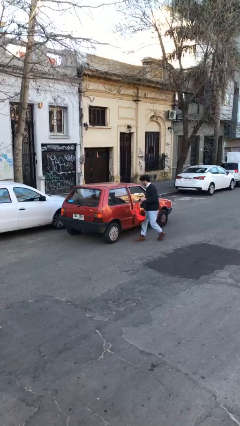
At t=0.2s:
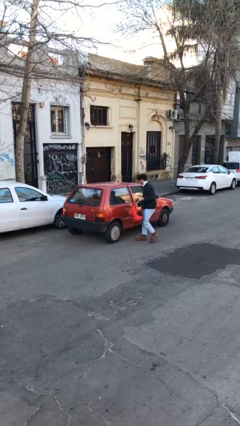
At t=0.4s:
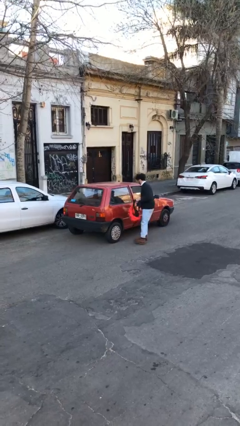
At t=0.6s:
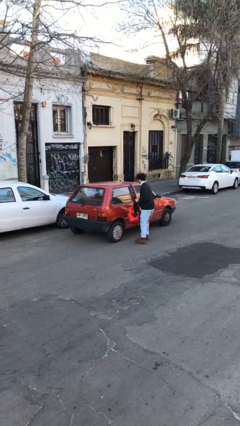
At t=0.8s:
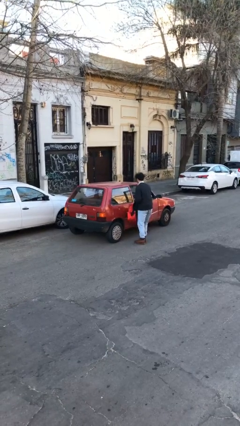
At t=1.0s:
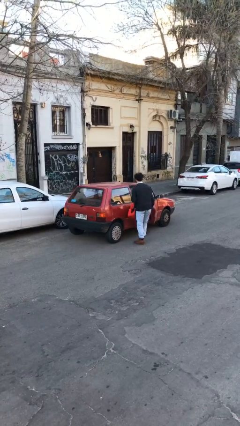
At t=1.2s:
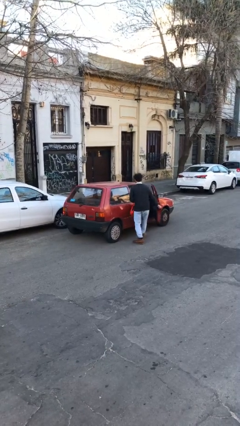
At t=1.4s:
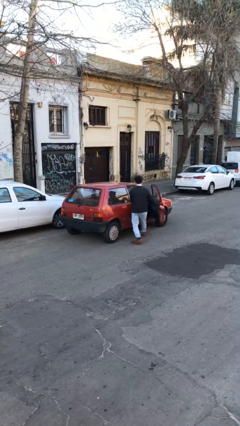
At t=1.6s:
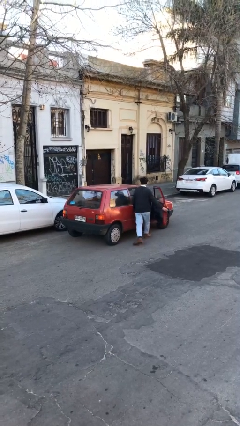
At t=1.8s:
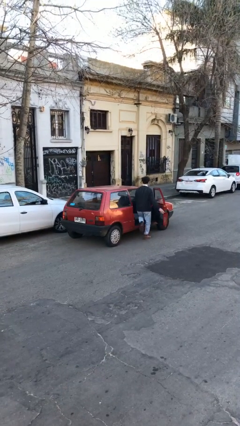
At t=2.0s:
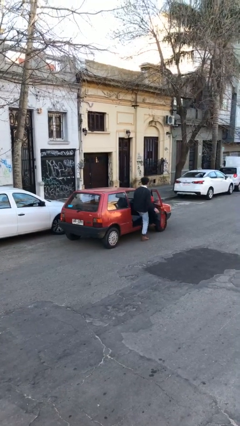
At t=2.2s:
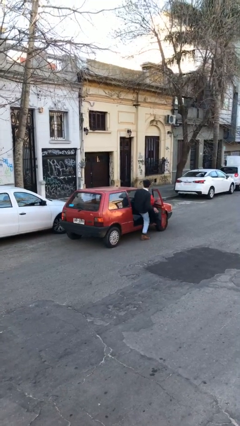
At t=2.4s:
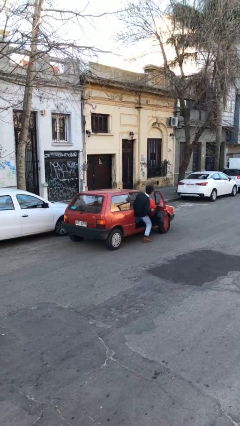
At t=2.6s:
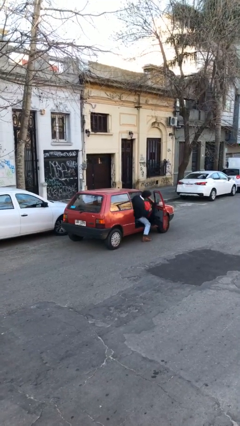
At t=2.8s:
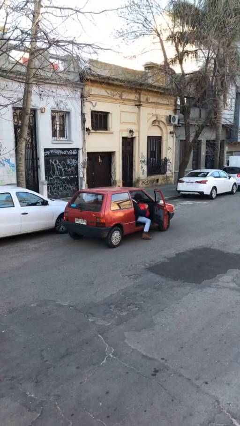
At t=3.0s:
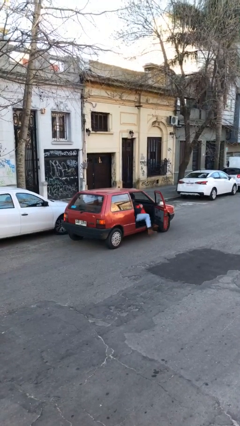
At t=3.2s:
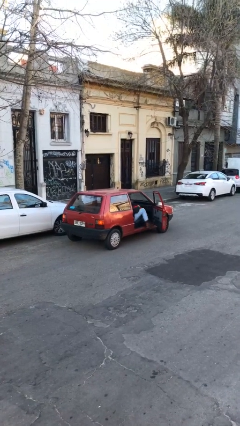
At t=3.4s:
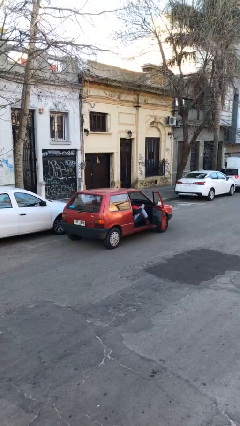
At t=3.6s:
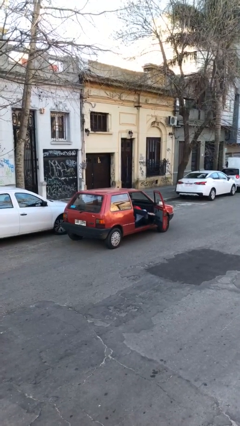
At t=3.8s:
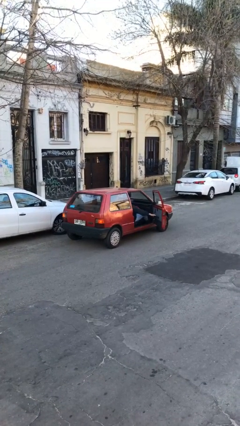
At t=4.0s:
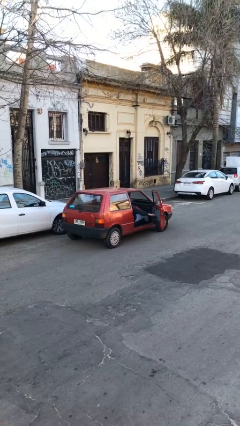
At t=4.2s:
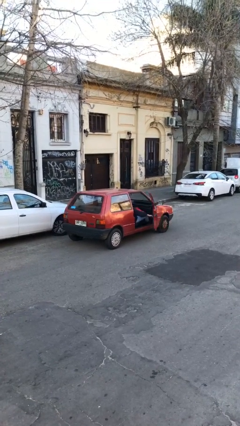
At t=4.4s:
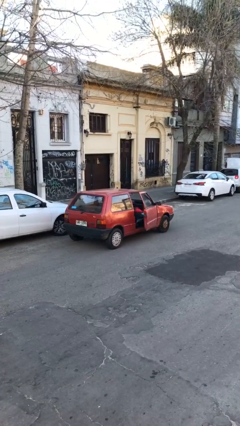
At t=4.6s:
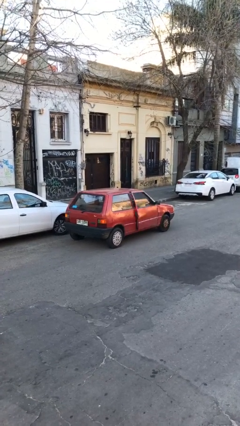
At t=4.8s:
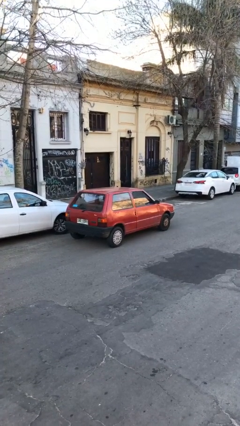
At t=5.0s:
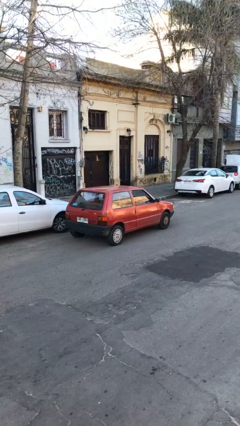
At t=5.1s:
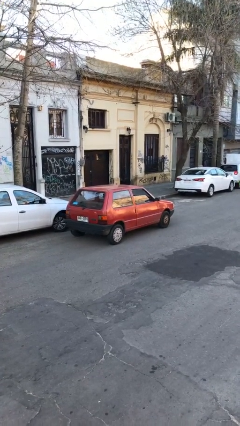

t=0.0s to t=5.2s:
car picks up person

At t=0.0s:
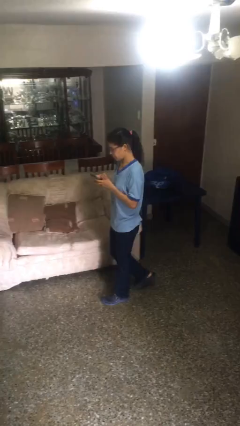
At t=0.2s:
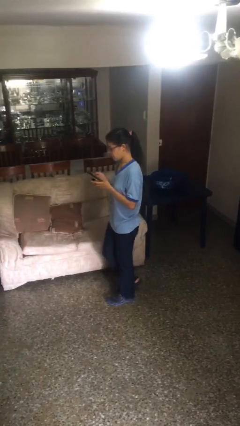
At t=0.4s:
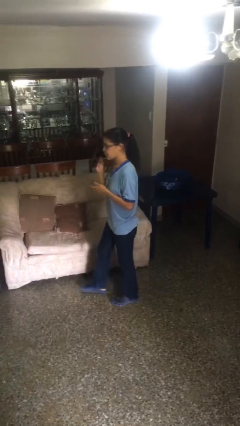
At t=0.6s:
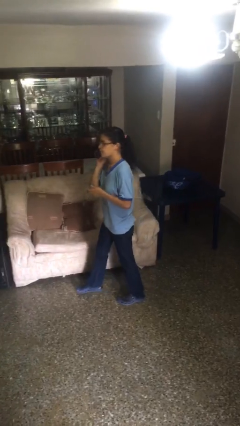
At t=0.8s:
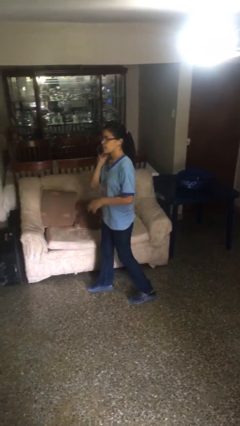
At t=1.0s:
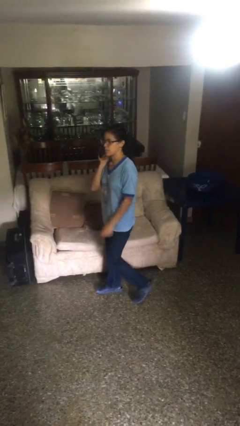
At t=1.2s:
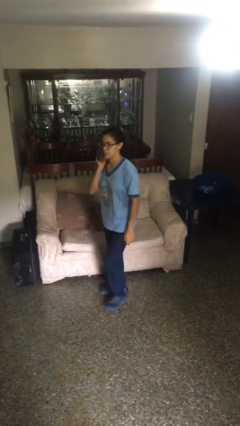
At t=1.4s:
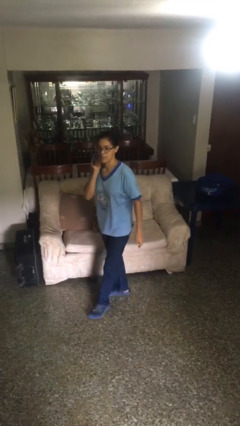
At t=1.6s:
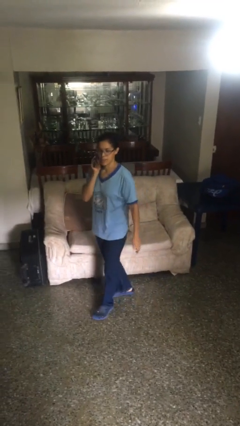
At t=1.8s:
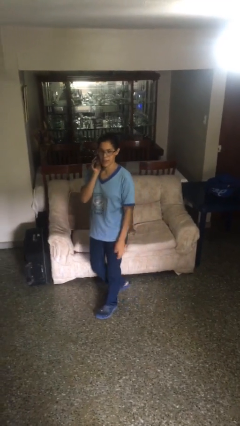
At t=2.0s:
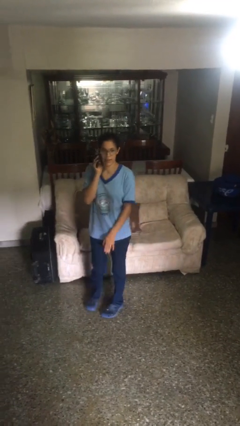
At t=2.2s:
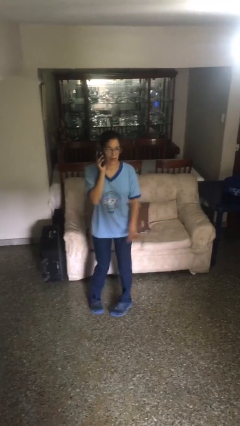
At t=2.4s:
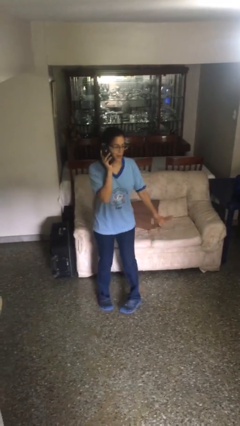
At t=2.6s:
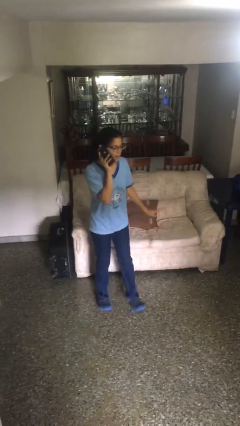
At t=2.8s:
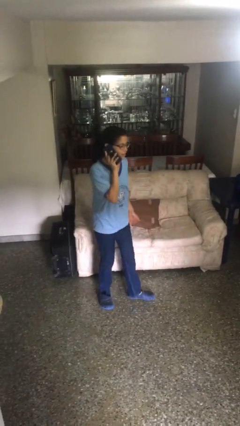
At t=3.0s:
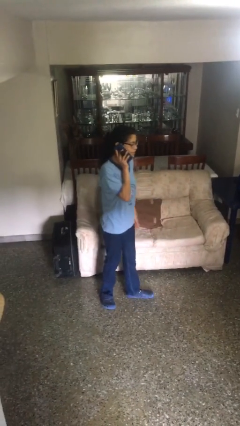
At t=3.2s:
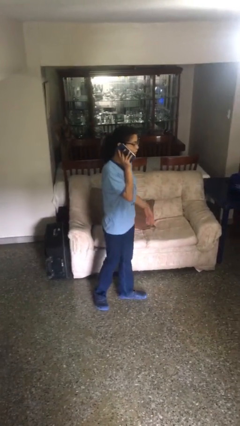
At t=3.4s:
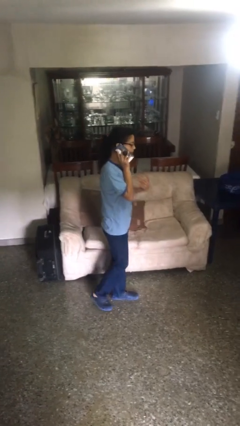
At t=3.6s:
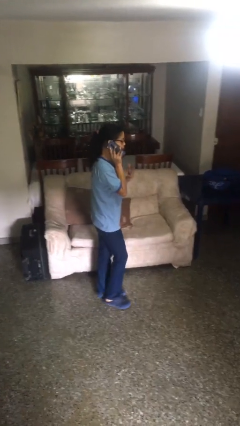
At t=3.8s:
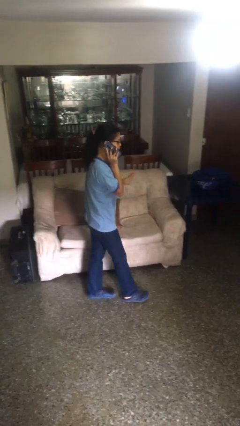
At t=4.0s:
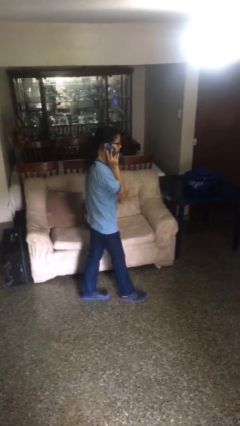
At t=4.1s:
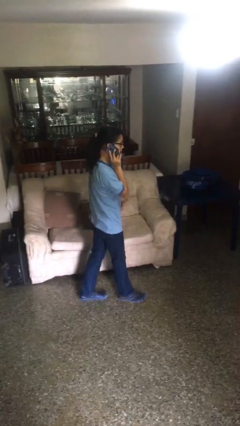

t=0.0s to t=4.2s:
person talks on phone

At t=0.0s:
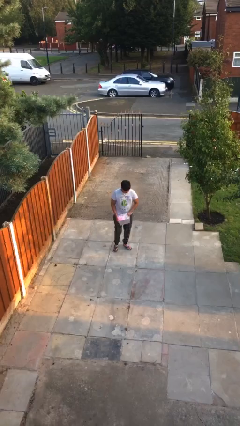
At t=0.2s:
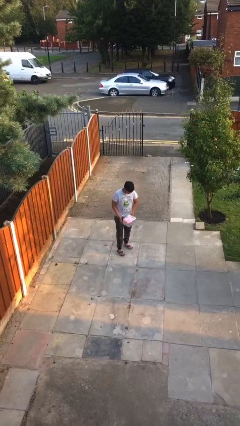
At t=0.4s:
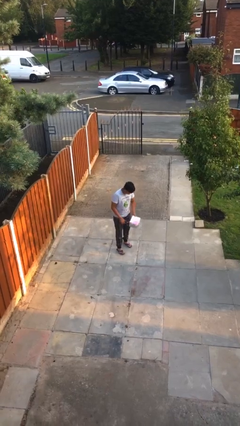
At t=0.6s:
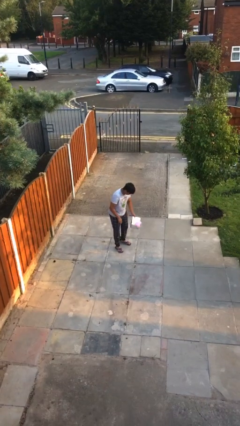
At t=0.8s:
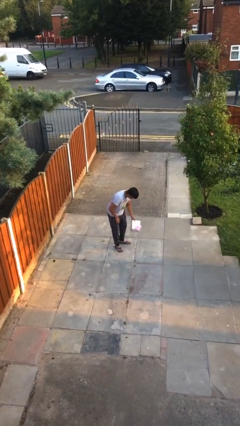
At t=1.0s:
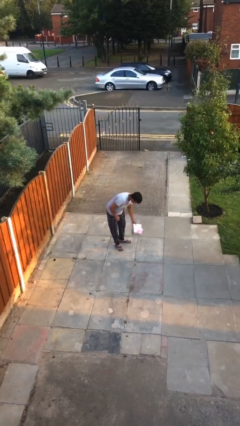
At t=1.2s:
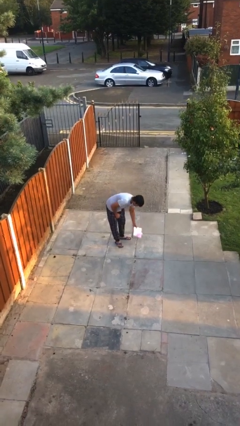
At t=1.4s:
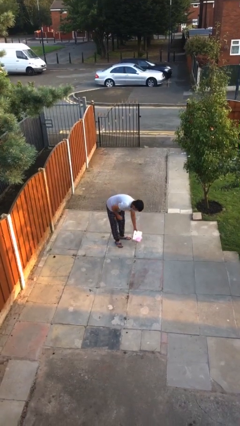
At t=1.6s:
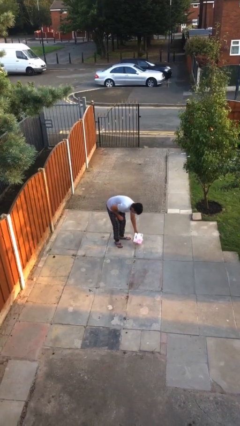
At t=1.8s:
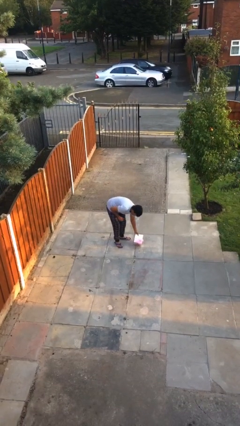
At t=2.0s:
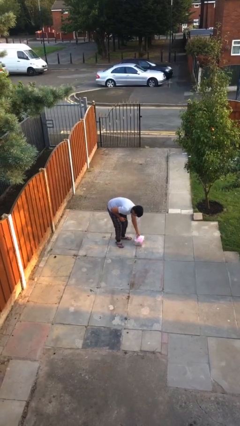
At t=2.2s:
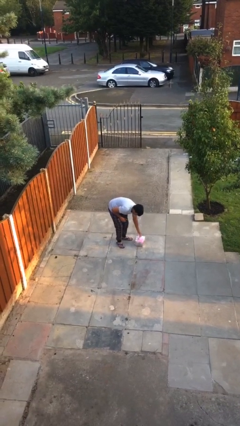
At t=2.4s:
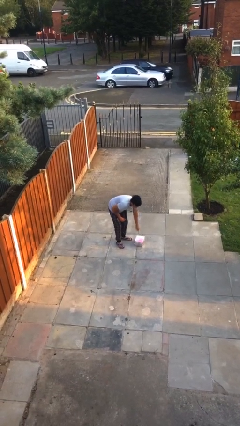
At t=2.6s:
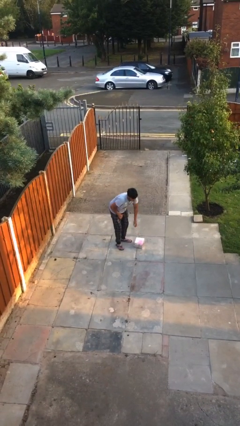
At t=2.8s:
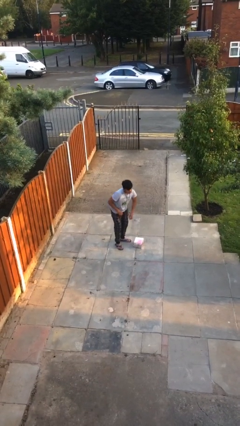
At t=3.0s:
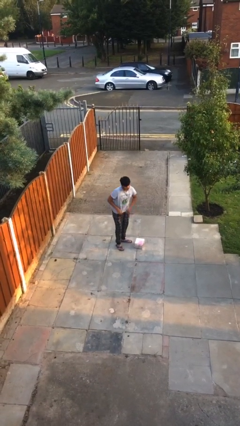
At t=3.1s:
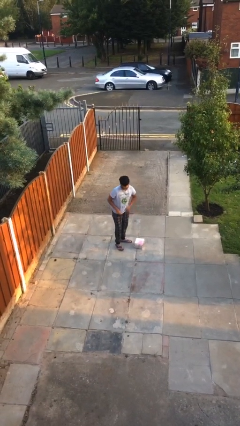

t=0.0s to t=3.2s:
person puts down object on floor

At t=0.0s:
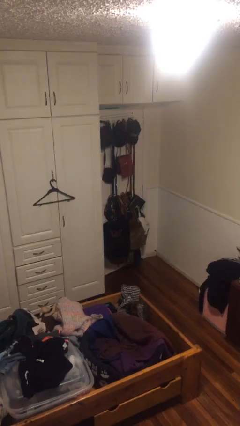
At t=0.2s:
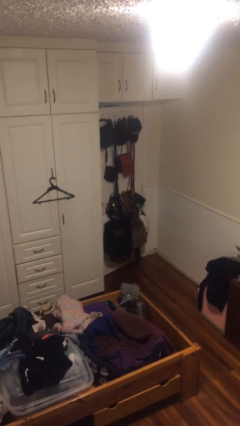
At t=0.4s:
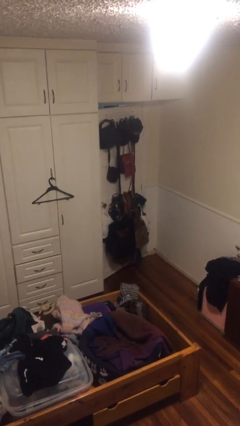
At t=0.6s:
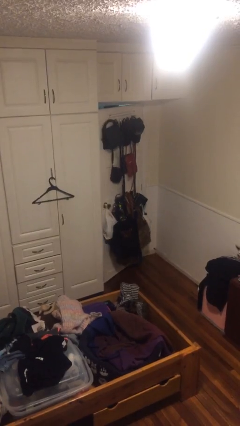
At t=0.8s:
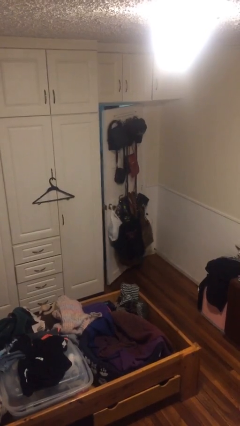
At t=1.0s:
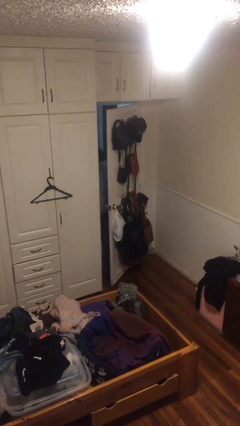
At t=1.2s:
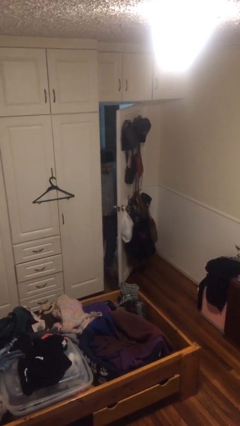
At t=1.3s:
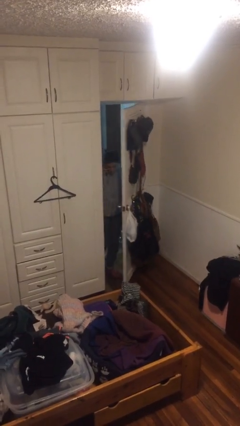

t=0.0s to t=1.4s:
person opens facility door

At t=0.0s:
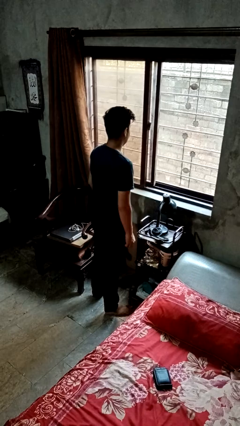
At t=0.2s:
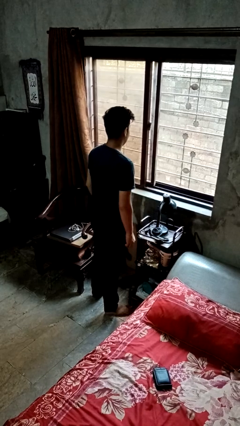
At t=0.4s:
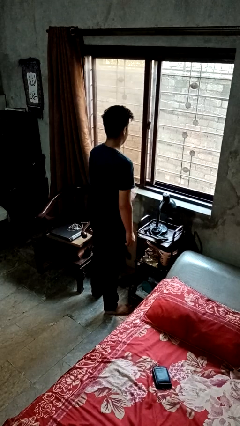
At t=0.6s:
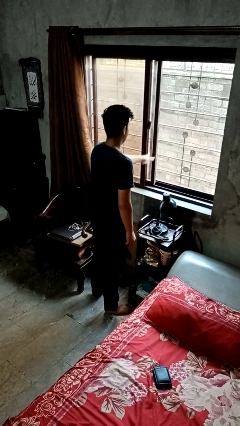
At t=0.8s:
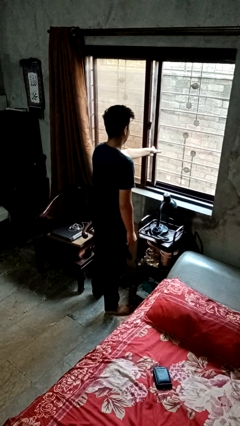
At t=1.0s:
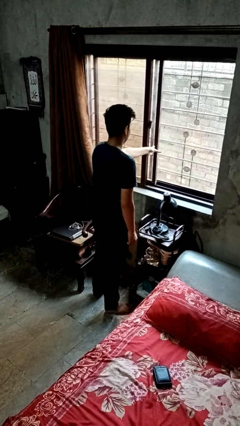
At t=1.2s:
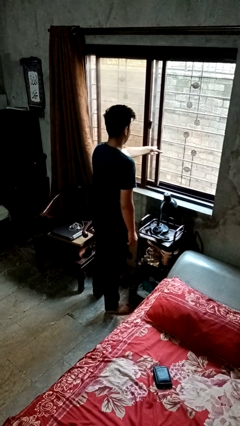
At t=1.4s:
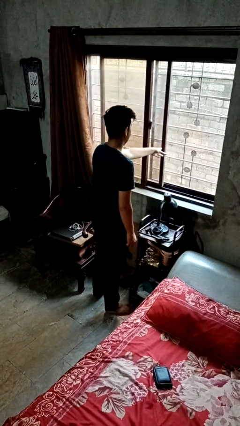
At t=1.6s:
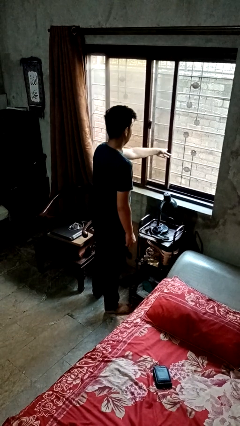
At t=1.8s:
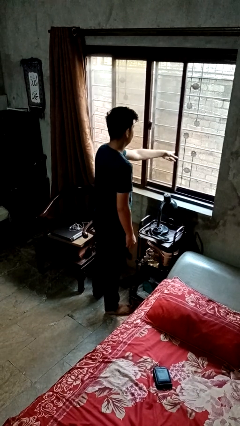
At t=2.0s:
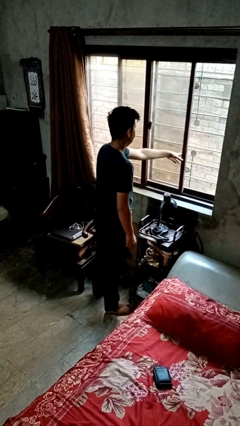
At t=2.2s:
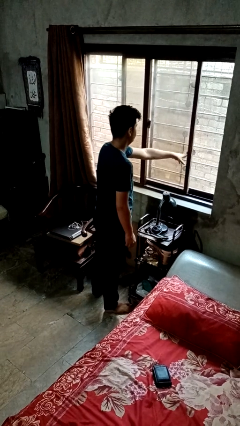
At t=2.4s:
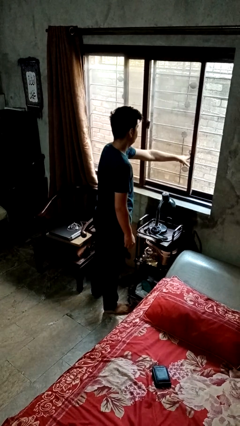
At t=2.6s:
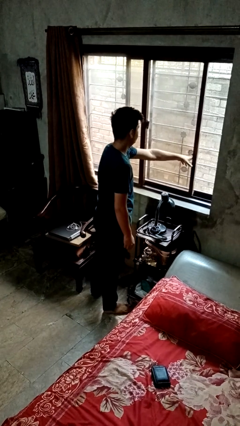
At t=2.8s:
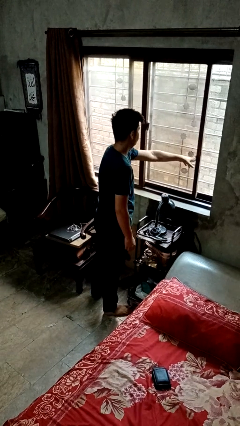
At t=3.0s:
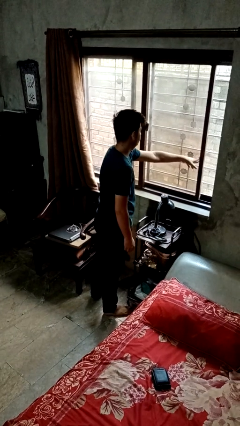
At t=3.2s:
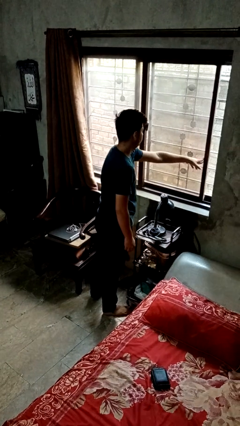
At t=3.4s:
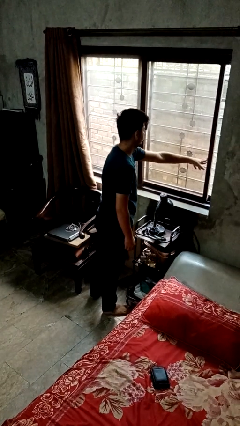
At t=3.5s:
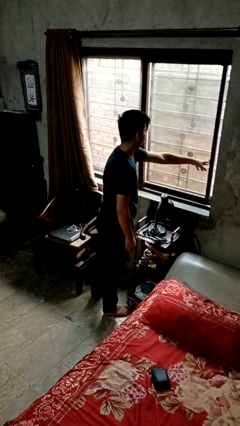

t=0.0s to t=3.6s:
person closes home window
